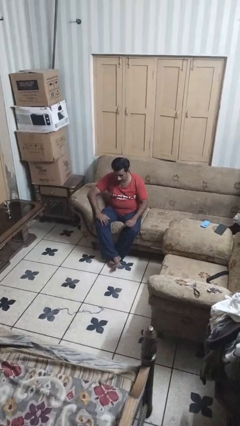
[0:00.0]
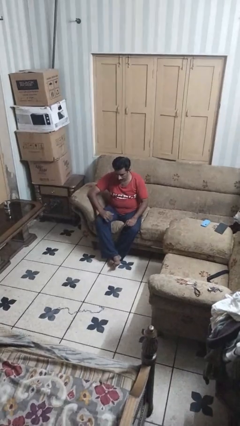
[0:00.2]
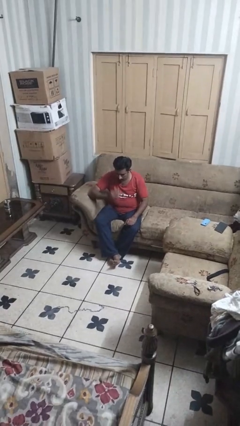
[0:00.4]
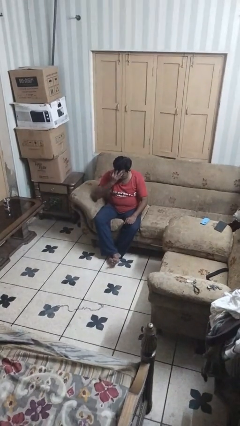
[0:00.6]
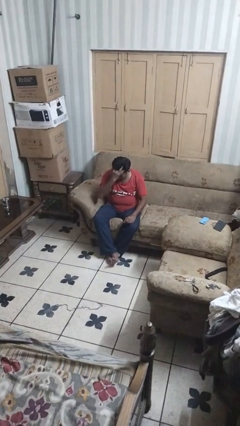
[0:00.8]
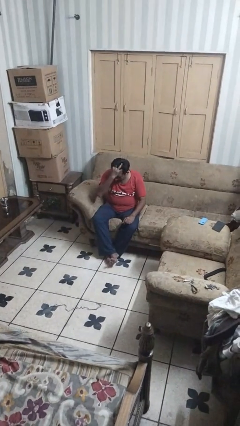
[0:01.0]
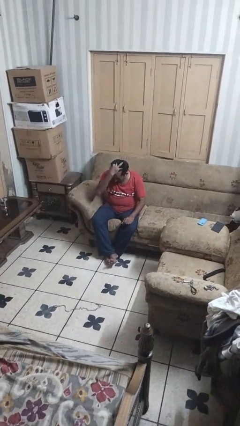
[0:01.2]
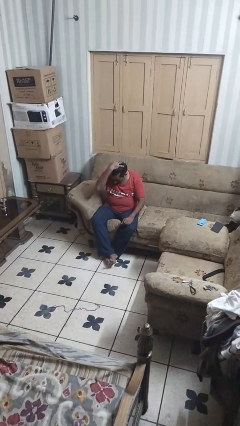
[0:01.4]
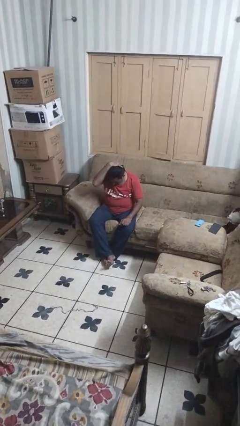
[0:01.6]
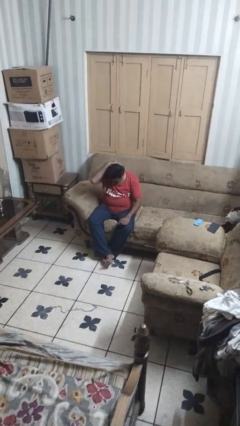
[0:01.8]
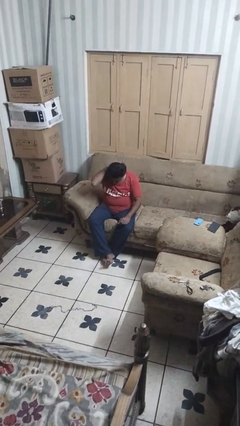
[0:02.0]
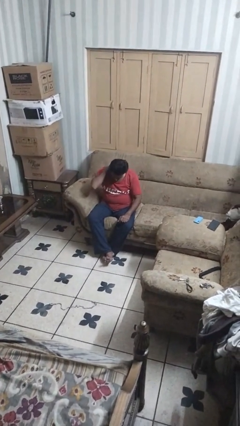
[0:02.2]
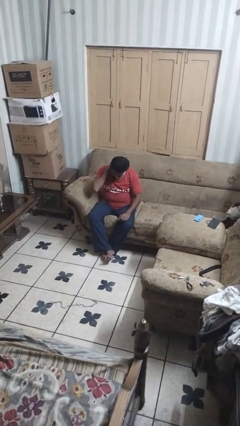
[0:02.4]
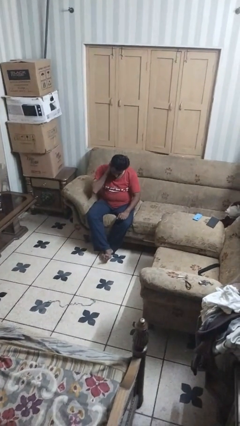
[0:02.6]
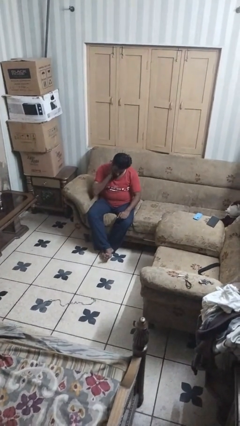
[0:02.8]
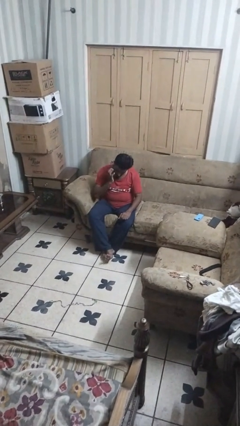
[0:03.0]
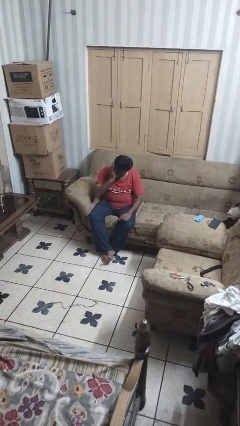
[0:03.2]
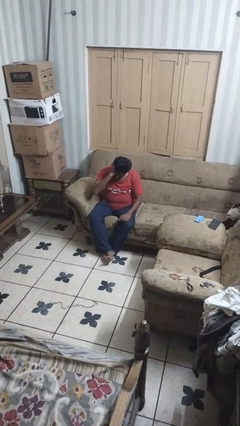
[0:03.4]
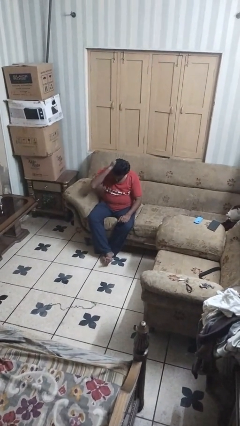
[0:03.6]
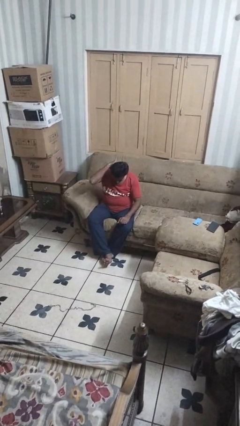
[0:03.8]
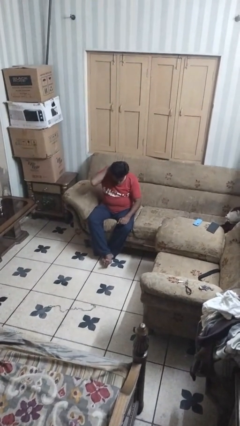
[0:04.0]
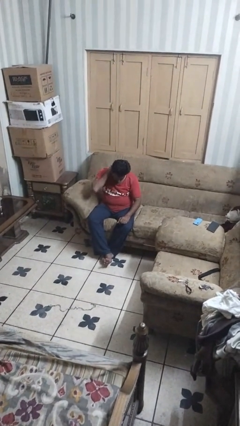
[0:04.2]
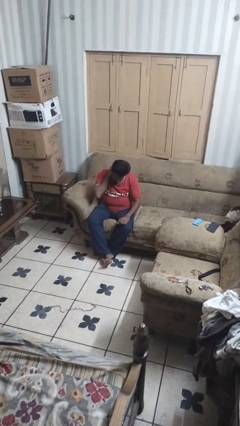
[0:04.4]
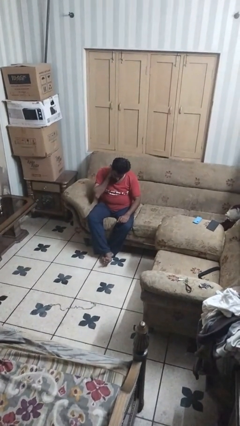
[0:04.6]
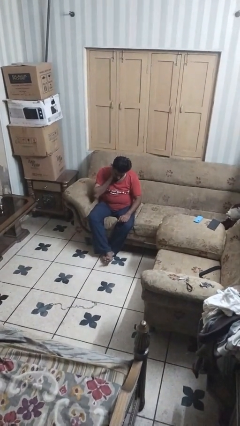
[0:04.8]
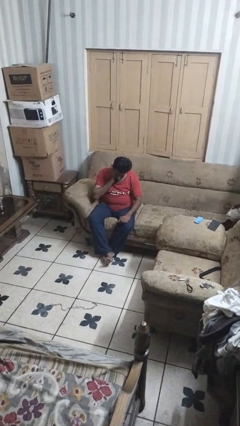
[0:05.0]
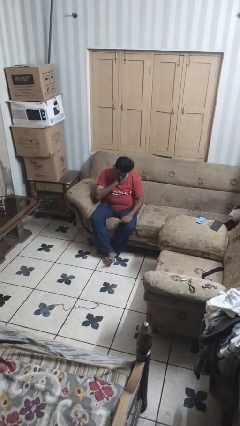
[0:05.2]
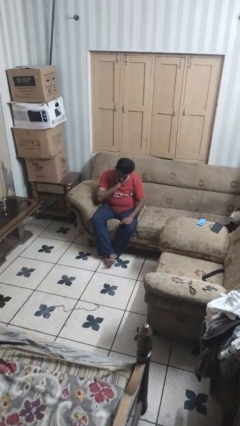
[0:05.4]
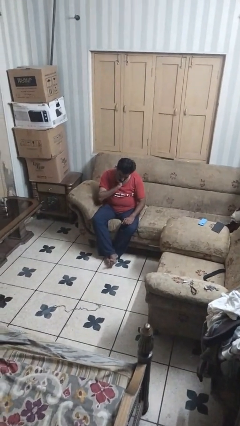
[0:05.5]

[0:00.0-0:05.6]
person strokes hair

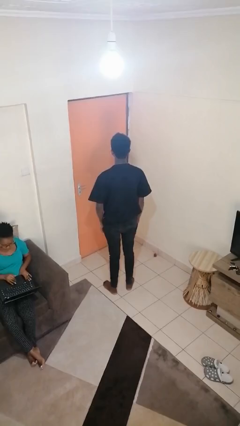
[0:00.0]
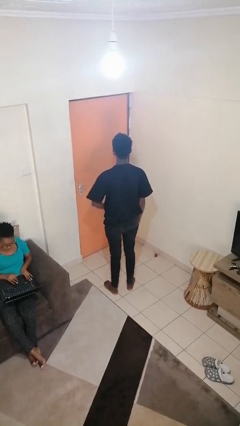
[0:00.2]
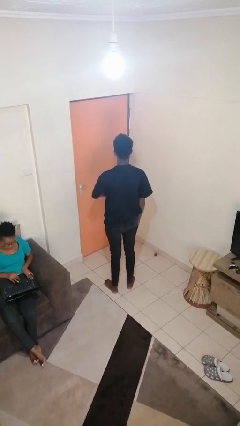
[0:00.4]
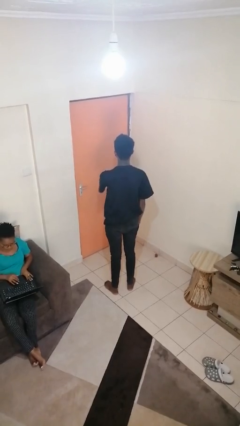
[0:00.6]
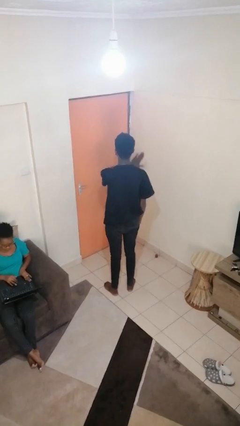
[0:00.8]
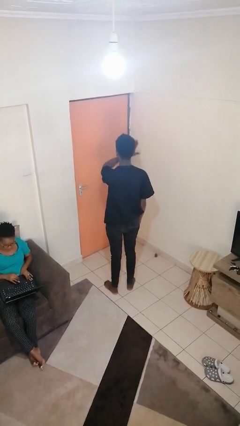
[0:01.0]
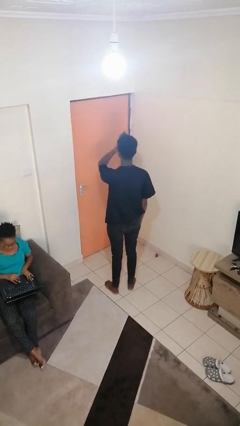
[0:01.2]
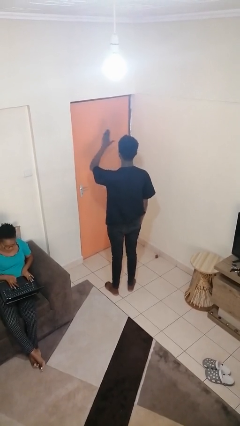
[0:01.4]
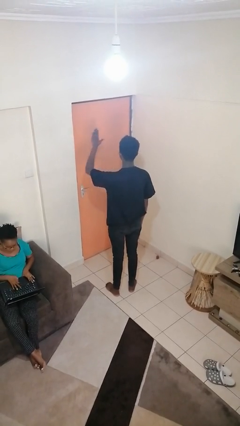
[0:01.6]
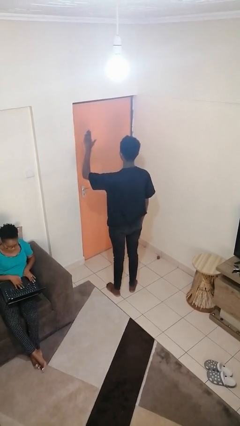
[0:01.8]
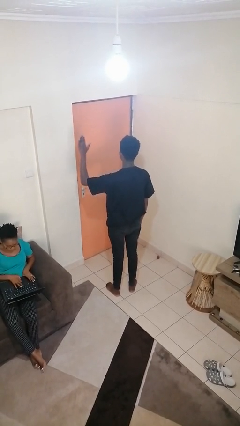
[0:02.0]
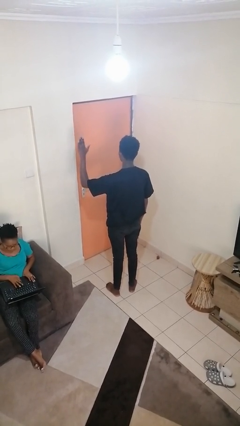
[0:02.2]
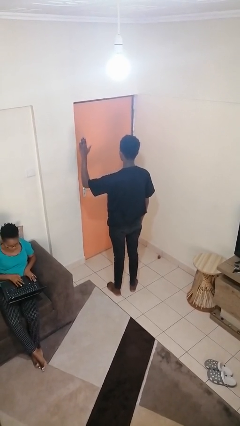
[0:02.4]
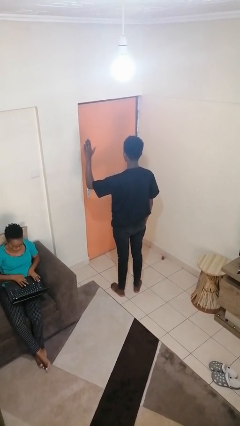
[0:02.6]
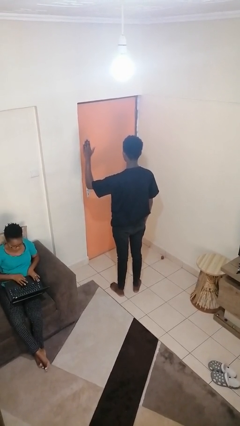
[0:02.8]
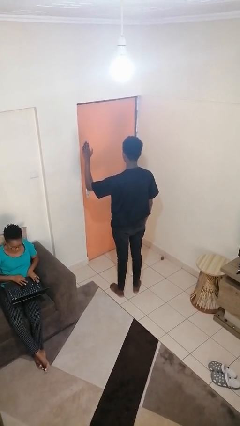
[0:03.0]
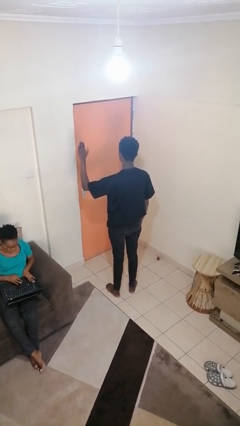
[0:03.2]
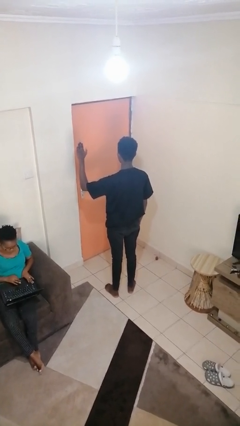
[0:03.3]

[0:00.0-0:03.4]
person gestures swipe left

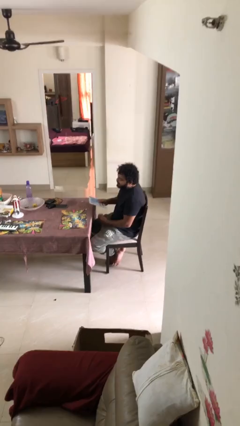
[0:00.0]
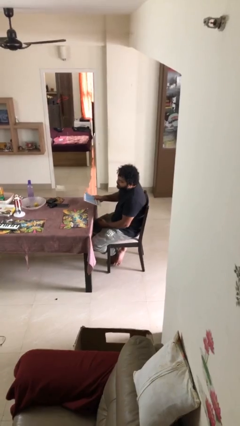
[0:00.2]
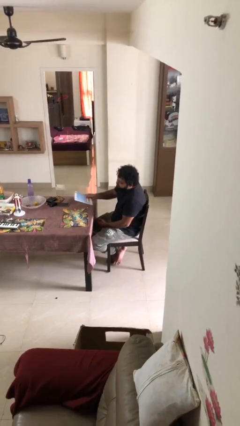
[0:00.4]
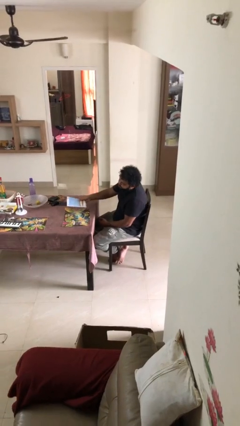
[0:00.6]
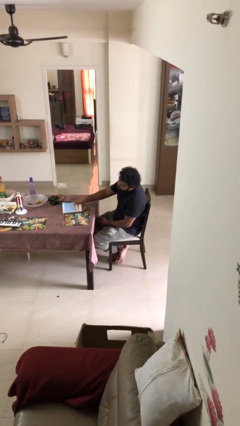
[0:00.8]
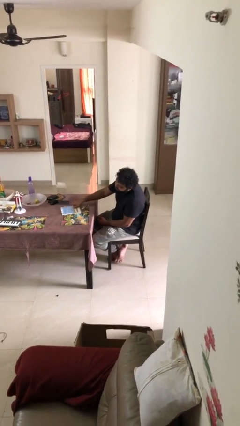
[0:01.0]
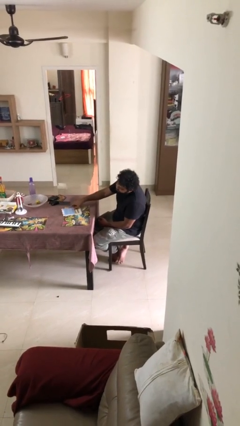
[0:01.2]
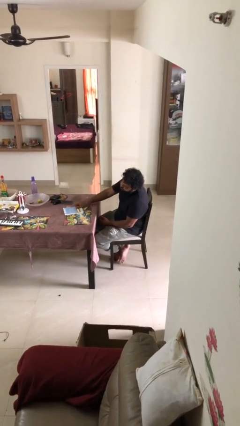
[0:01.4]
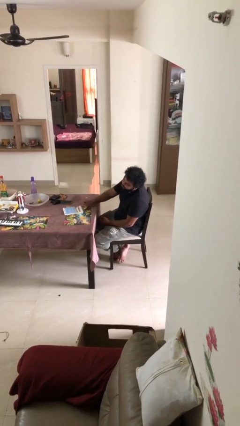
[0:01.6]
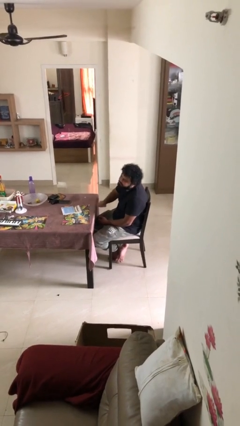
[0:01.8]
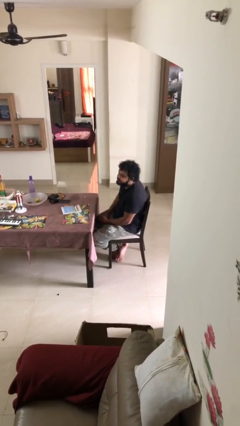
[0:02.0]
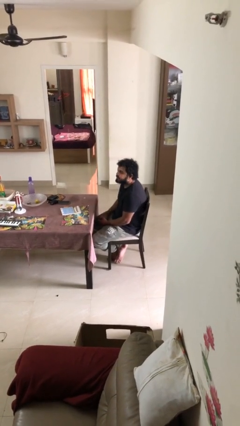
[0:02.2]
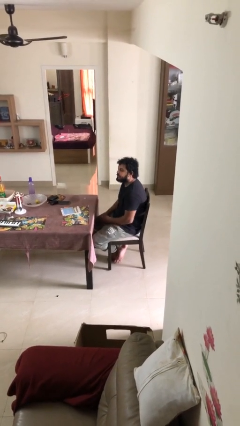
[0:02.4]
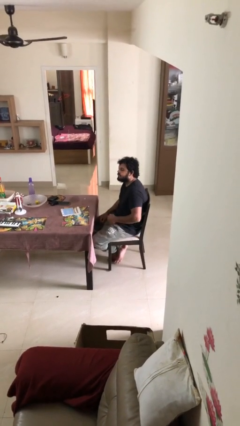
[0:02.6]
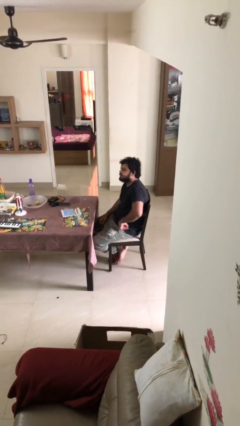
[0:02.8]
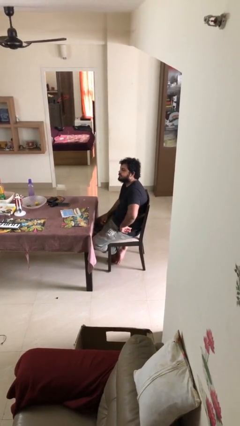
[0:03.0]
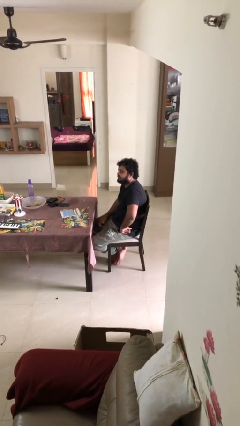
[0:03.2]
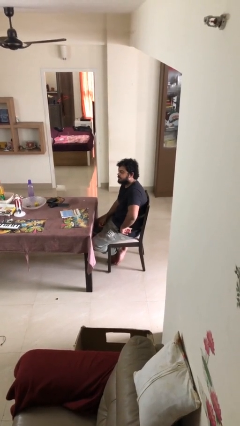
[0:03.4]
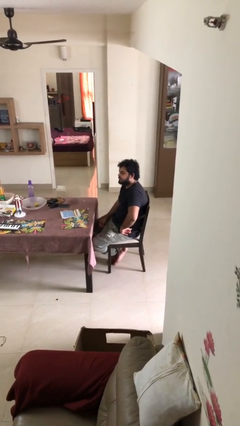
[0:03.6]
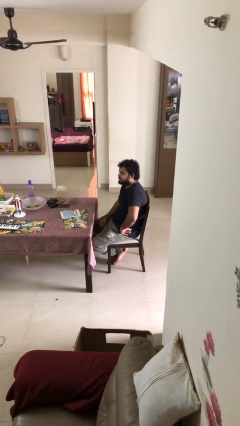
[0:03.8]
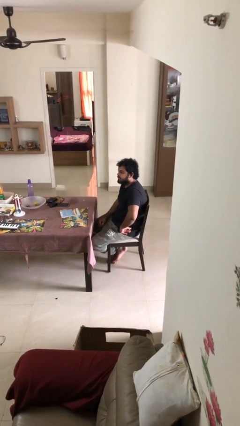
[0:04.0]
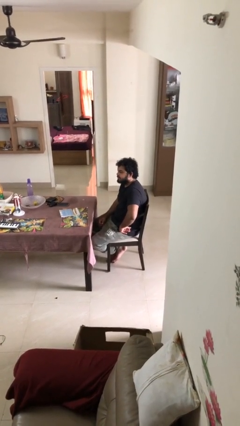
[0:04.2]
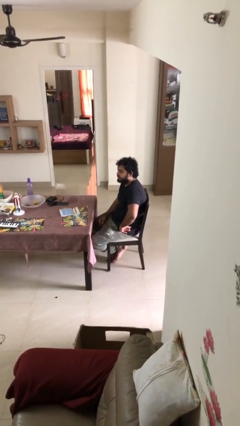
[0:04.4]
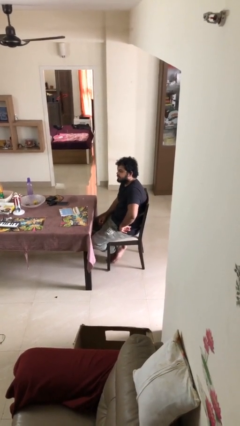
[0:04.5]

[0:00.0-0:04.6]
person puts down object on table

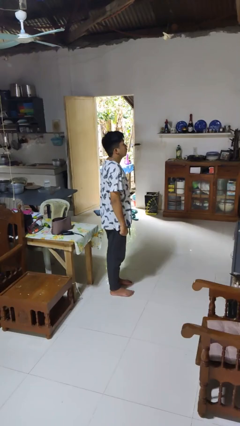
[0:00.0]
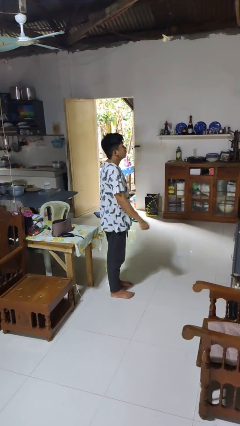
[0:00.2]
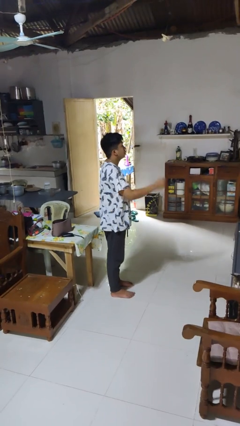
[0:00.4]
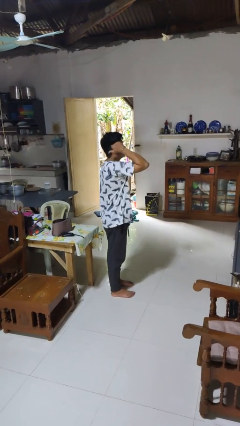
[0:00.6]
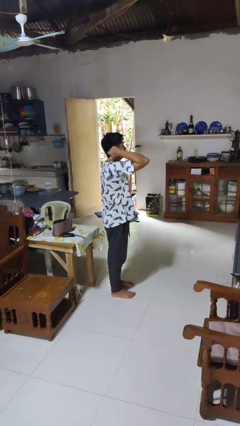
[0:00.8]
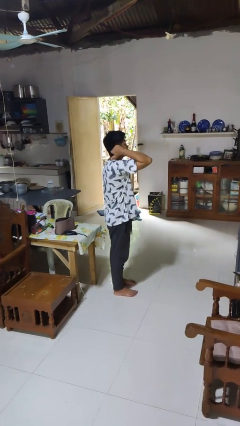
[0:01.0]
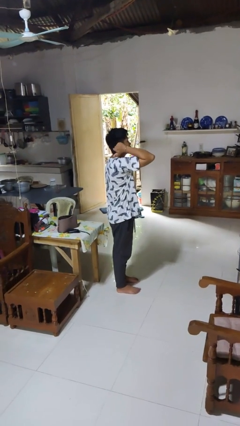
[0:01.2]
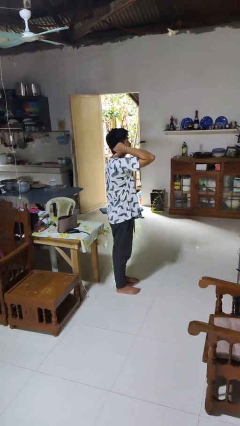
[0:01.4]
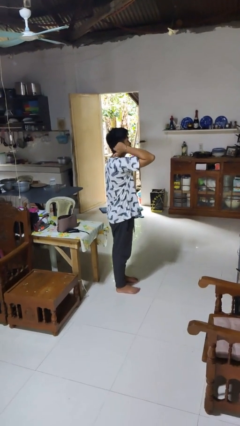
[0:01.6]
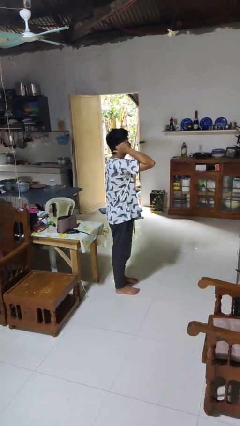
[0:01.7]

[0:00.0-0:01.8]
person gestures behind me

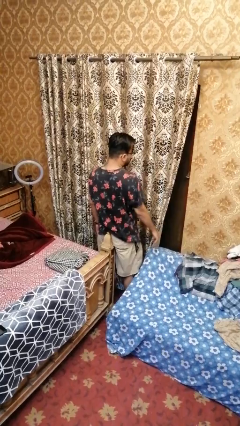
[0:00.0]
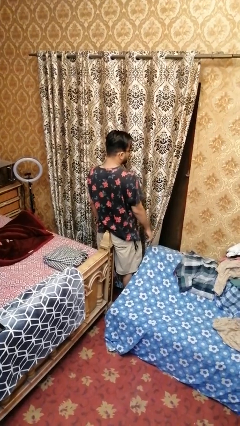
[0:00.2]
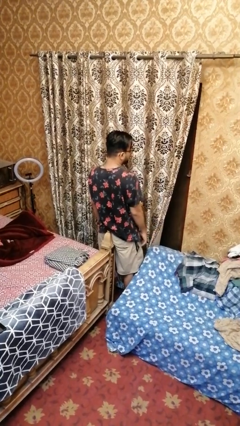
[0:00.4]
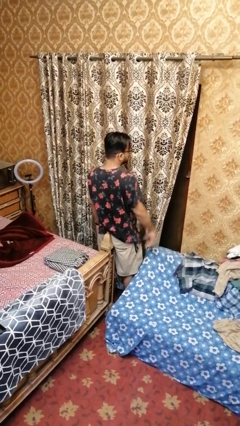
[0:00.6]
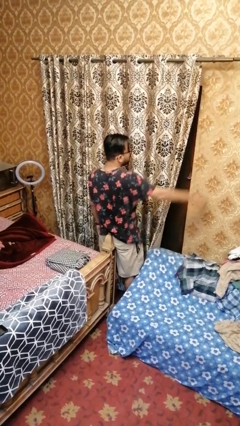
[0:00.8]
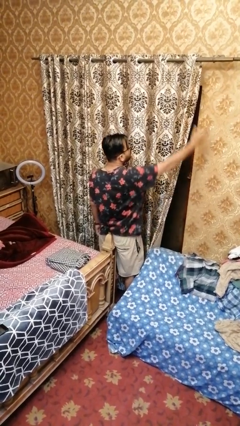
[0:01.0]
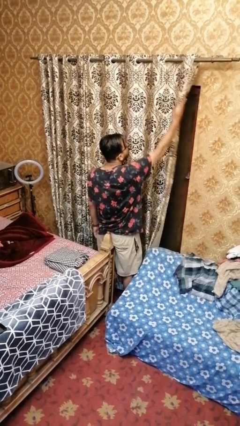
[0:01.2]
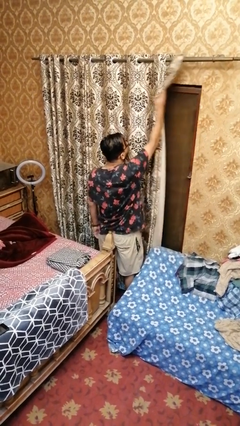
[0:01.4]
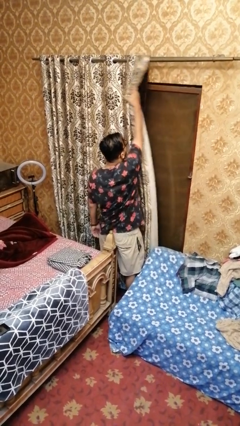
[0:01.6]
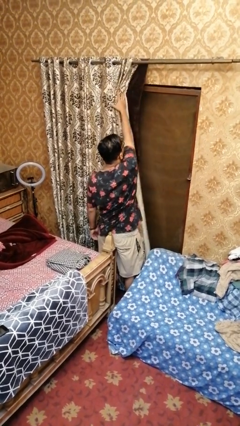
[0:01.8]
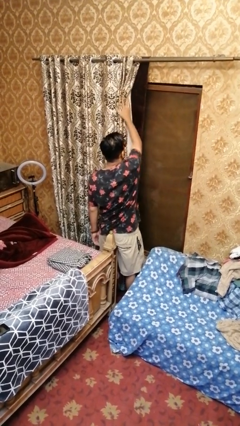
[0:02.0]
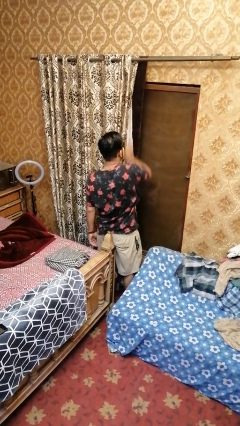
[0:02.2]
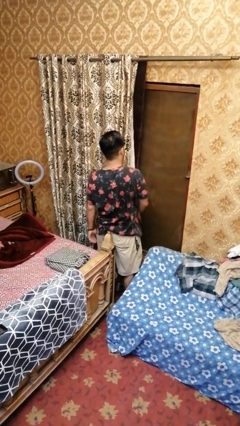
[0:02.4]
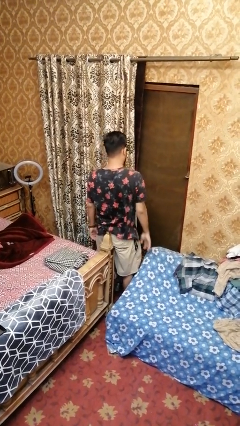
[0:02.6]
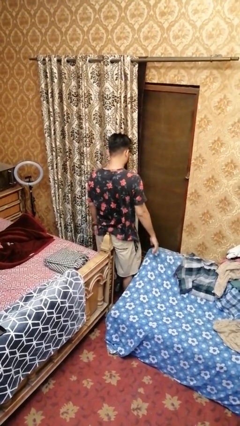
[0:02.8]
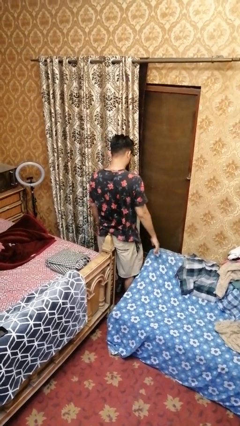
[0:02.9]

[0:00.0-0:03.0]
person opens curtains
